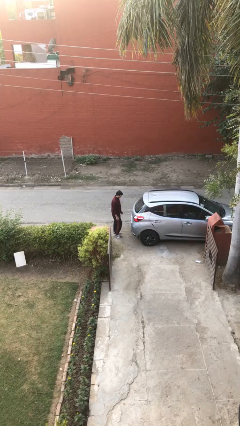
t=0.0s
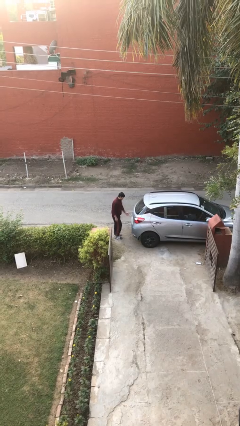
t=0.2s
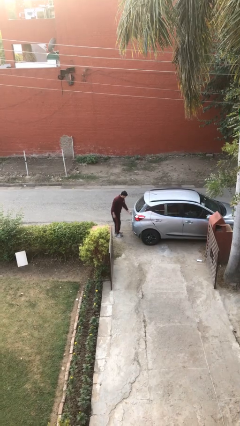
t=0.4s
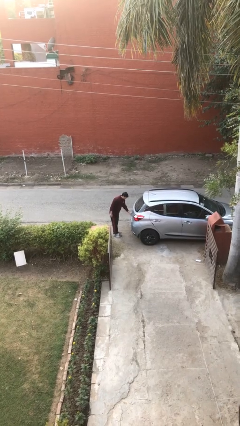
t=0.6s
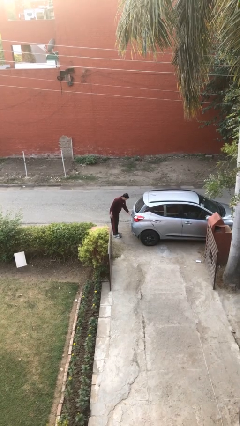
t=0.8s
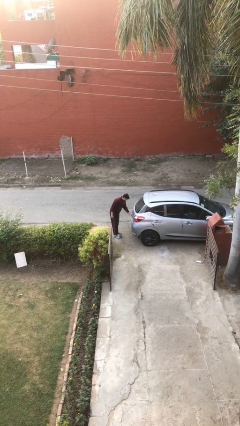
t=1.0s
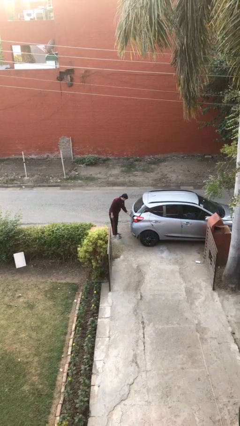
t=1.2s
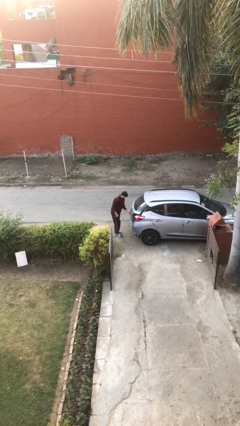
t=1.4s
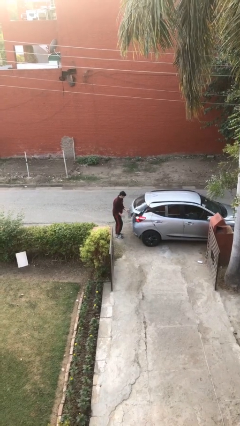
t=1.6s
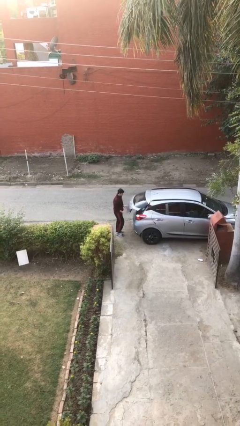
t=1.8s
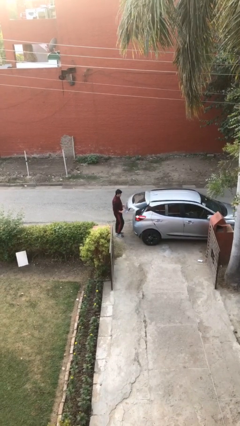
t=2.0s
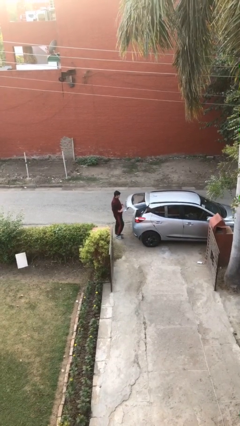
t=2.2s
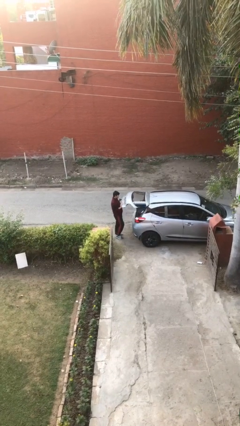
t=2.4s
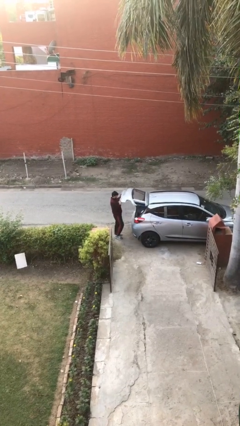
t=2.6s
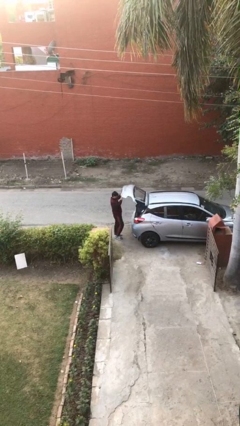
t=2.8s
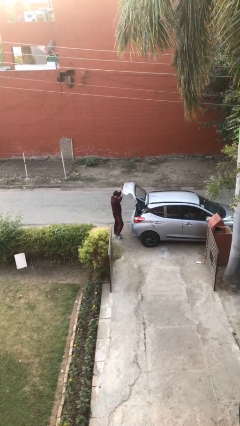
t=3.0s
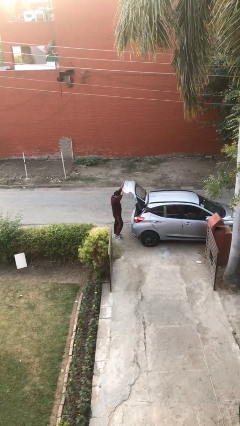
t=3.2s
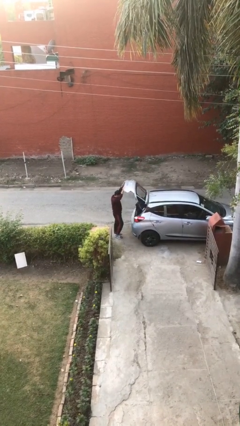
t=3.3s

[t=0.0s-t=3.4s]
person opens car trunk

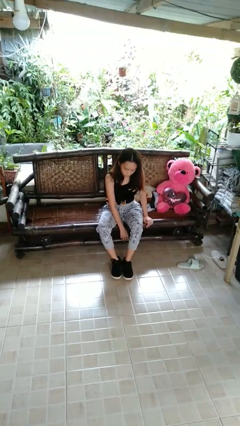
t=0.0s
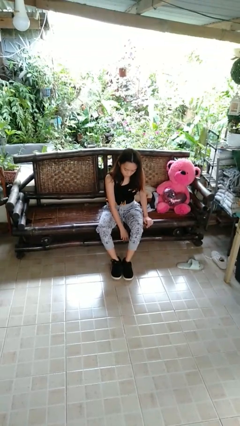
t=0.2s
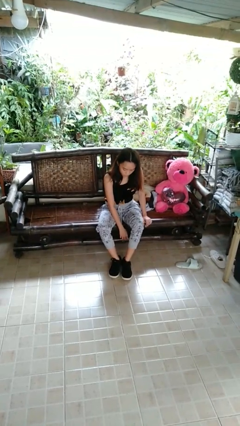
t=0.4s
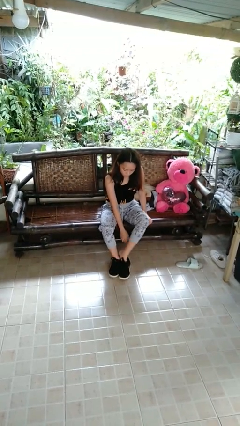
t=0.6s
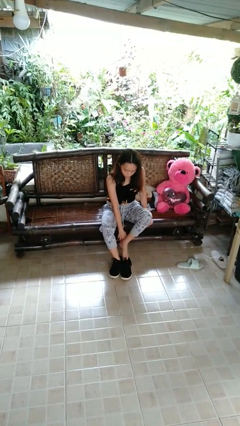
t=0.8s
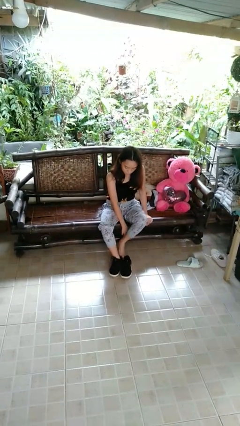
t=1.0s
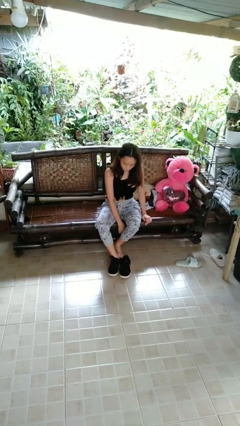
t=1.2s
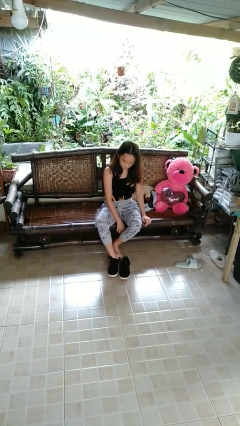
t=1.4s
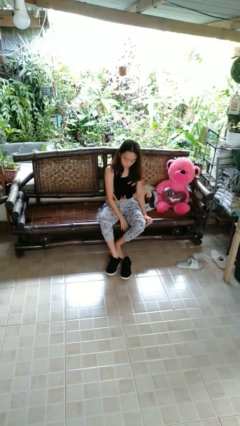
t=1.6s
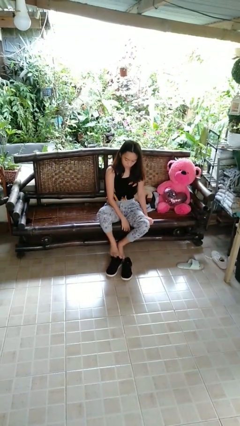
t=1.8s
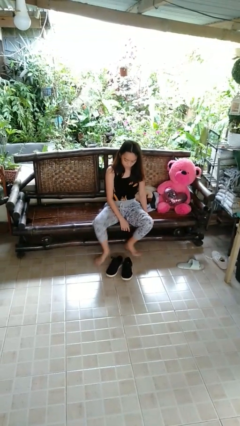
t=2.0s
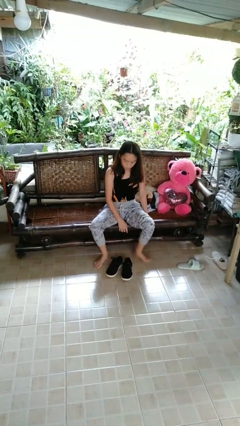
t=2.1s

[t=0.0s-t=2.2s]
person takes off shoes

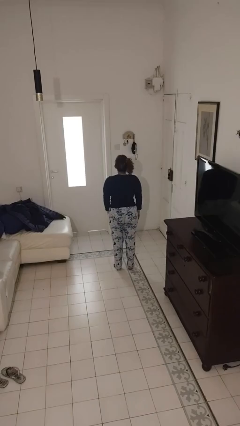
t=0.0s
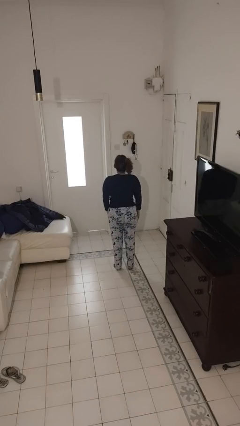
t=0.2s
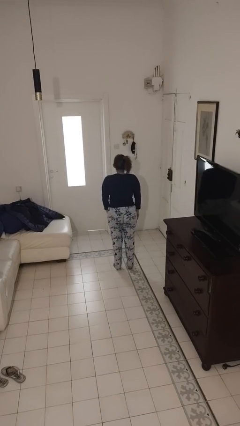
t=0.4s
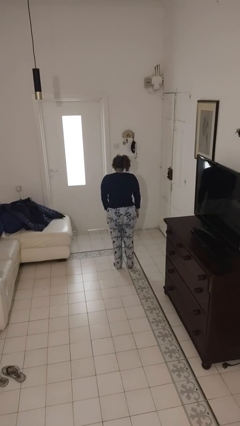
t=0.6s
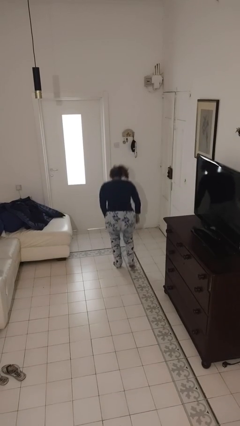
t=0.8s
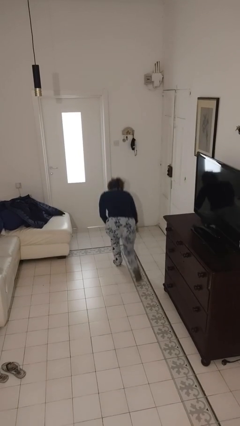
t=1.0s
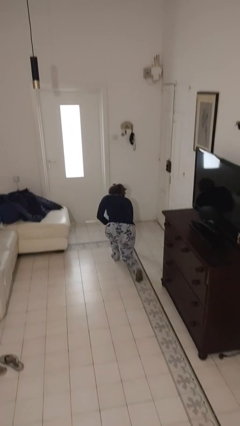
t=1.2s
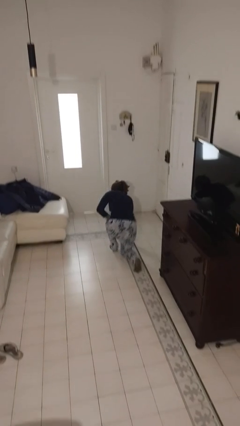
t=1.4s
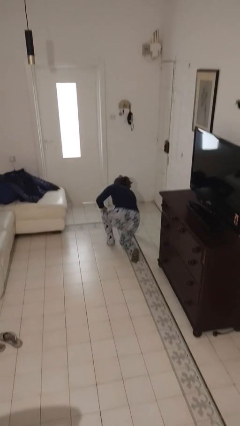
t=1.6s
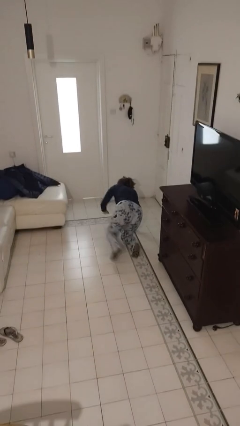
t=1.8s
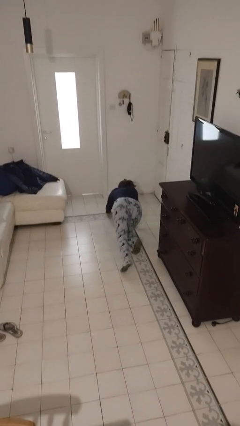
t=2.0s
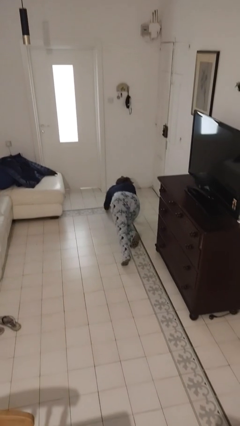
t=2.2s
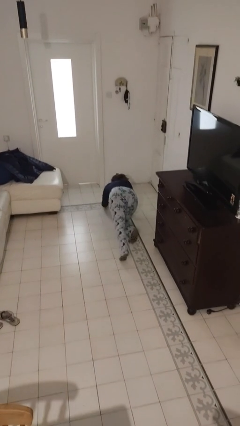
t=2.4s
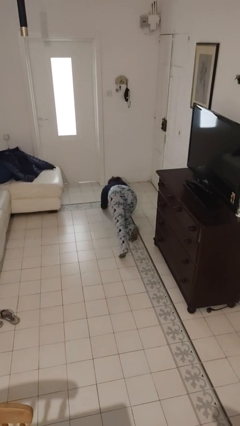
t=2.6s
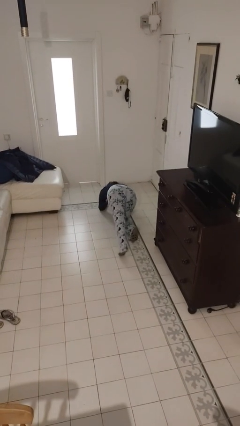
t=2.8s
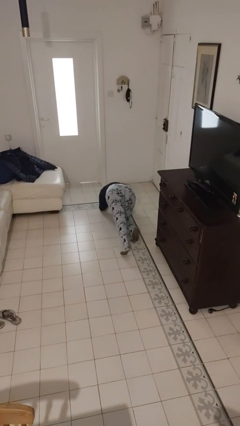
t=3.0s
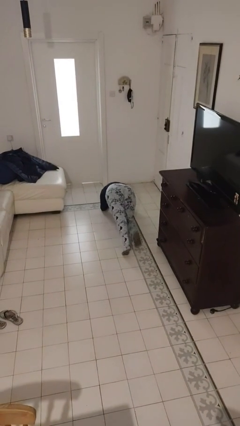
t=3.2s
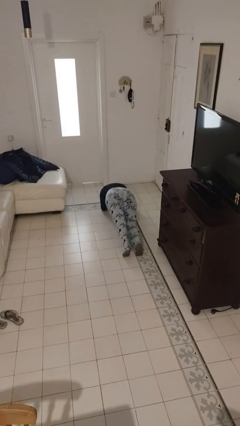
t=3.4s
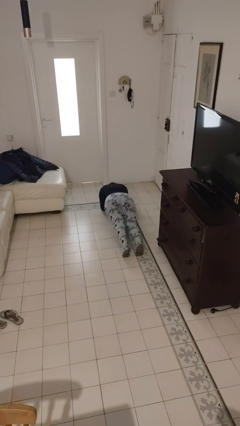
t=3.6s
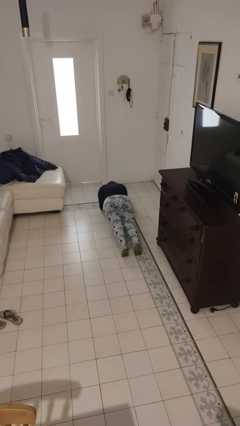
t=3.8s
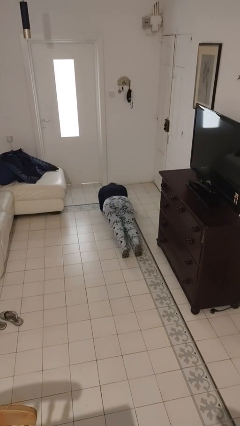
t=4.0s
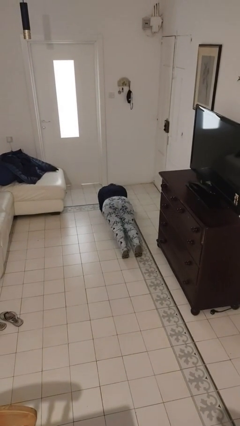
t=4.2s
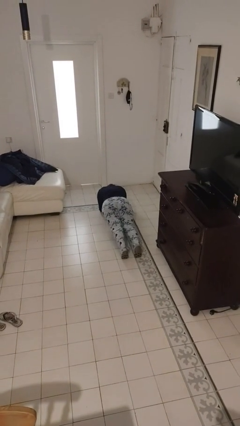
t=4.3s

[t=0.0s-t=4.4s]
person exercises with plank

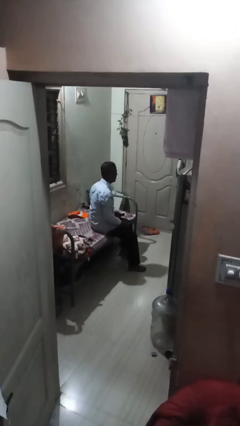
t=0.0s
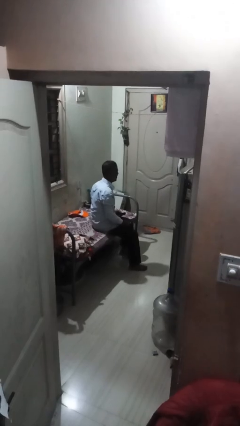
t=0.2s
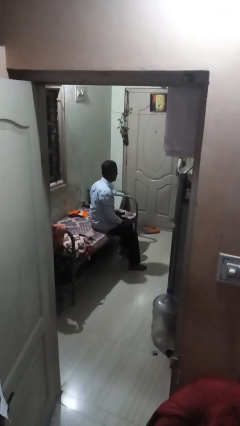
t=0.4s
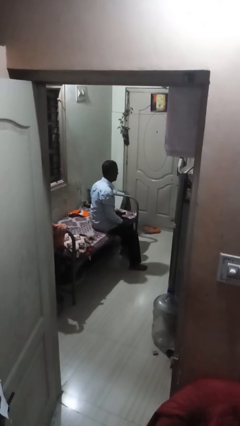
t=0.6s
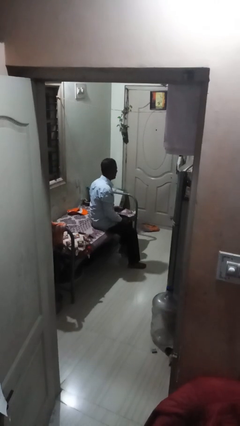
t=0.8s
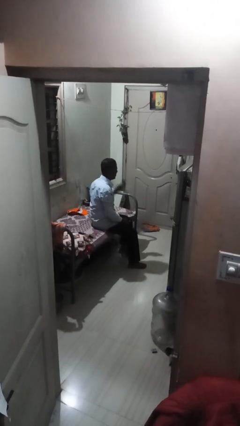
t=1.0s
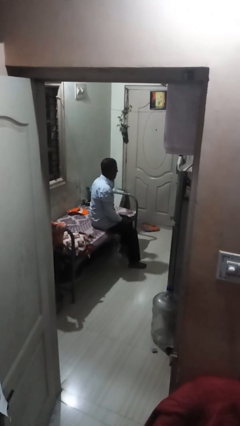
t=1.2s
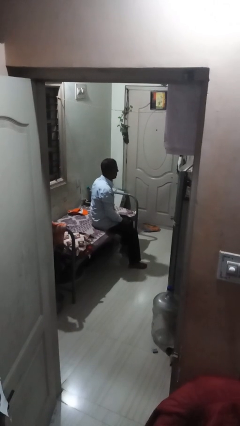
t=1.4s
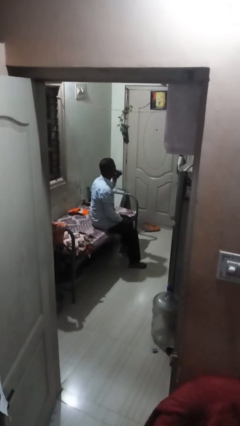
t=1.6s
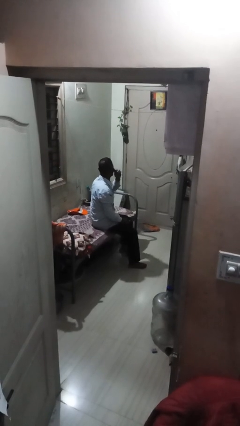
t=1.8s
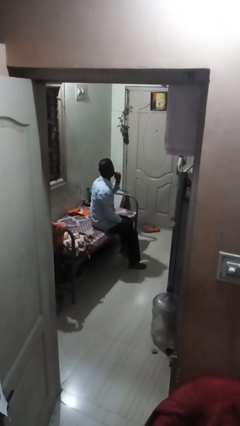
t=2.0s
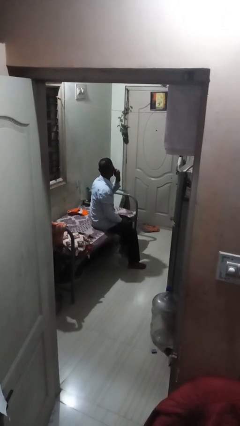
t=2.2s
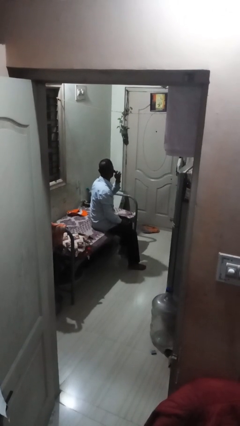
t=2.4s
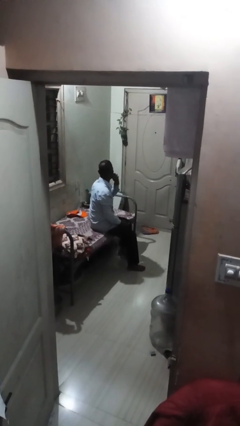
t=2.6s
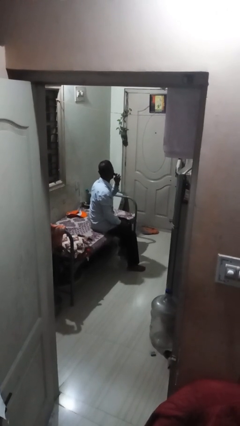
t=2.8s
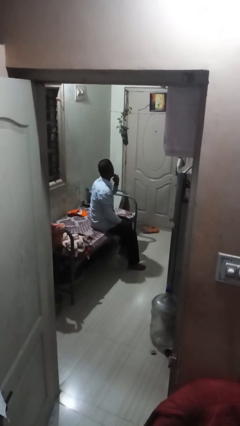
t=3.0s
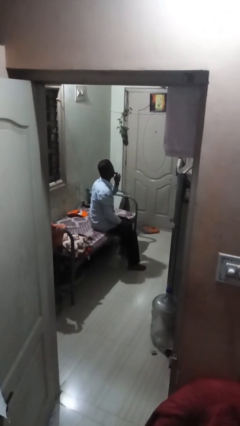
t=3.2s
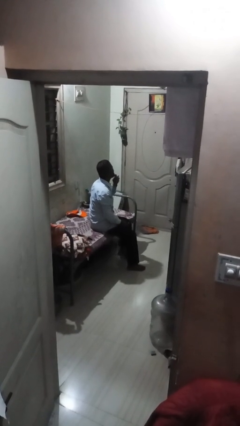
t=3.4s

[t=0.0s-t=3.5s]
person applies shaving cream

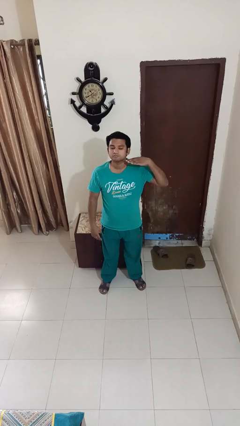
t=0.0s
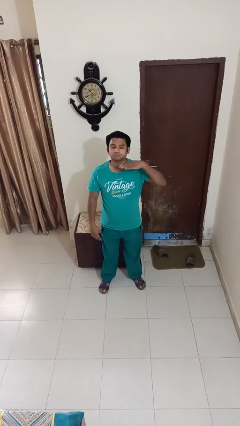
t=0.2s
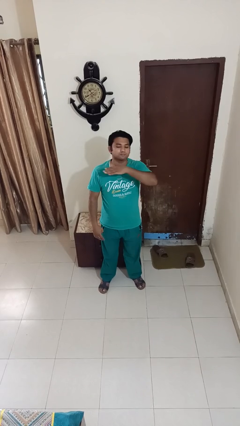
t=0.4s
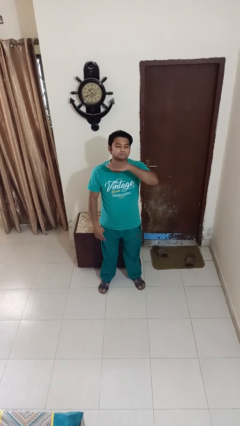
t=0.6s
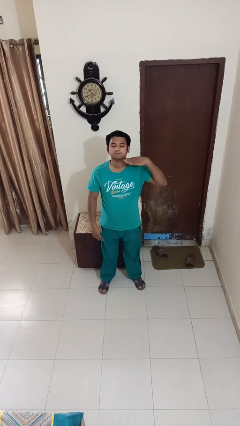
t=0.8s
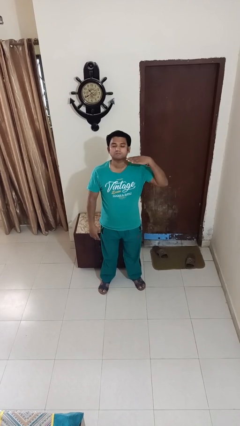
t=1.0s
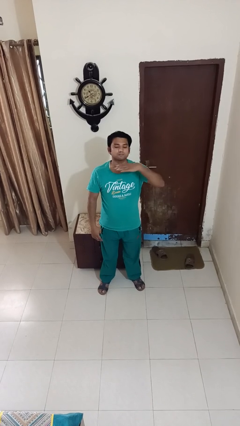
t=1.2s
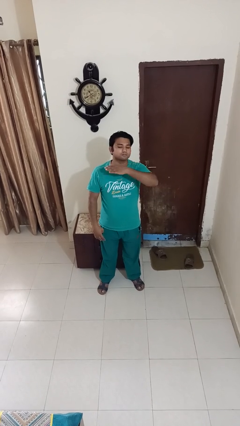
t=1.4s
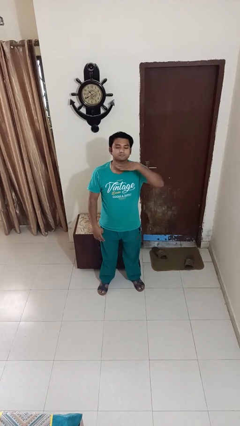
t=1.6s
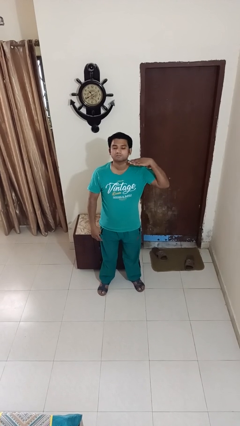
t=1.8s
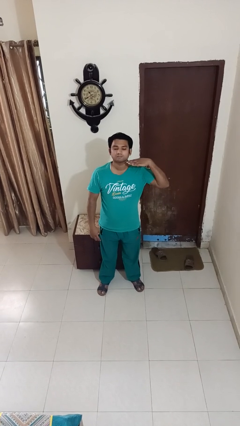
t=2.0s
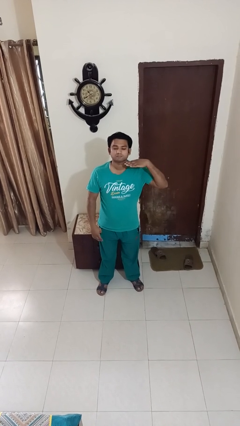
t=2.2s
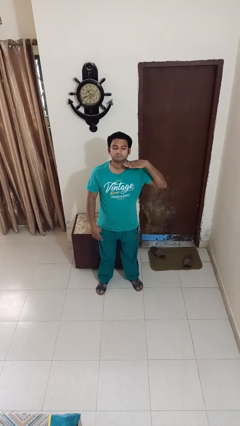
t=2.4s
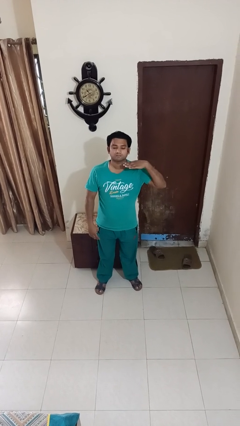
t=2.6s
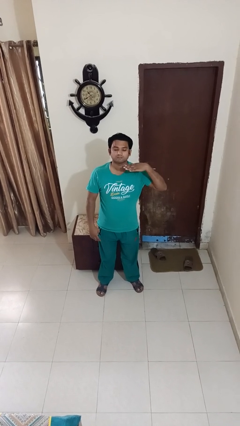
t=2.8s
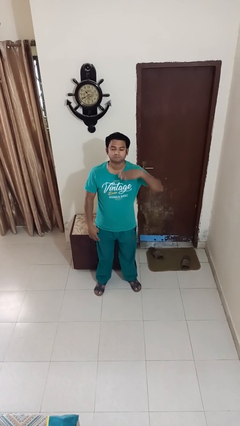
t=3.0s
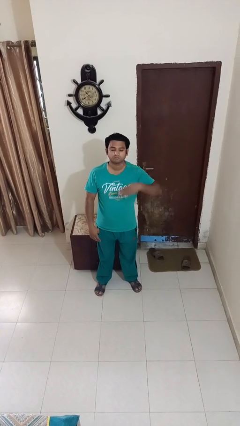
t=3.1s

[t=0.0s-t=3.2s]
person gestures cut

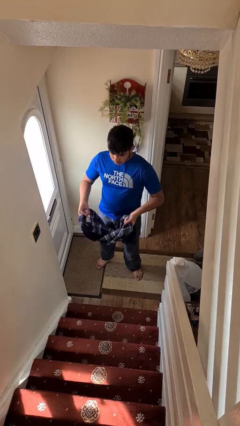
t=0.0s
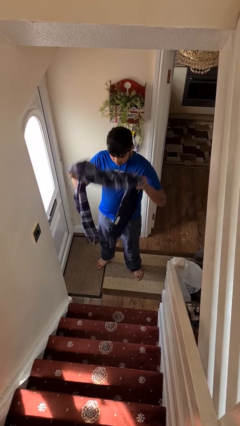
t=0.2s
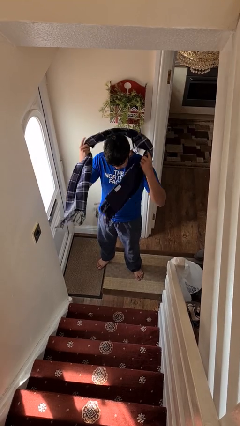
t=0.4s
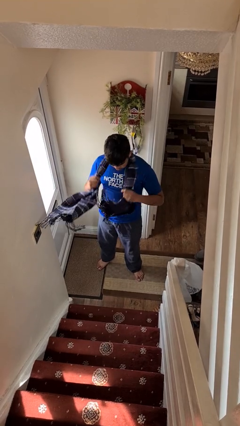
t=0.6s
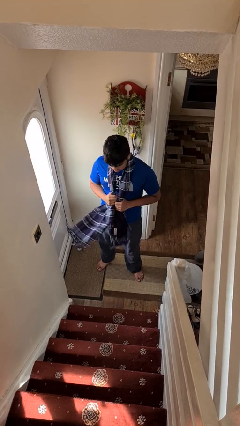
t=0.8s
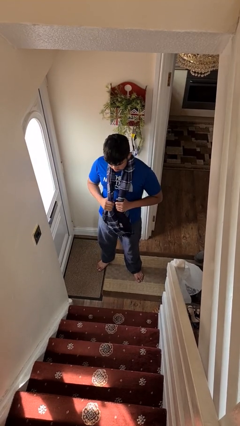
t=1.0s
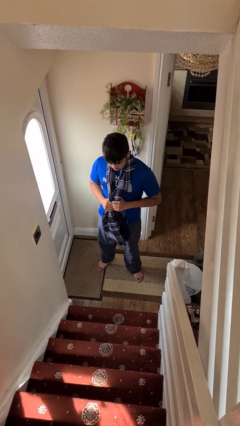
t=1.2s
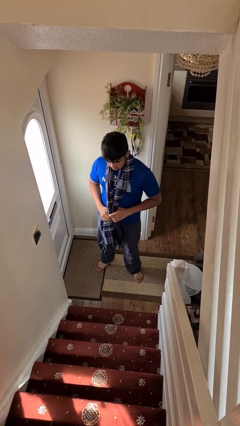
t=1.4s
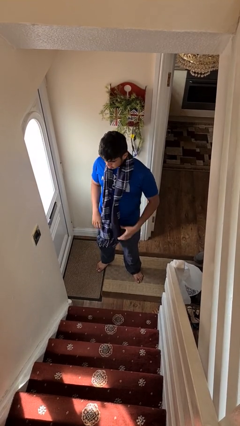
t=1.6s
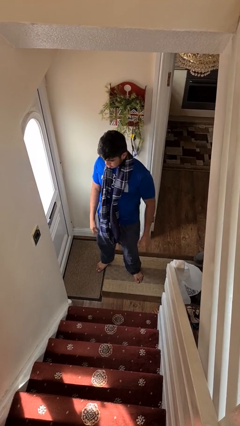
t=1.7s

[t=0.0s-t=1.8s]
person puts on scarf
